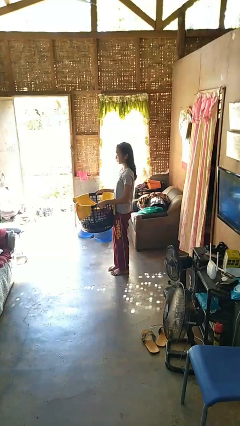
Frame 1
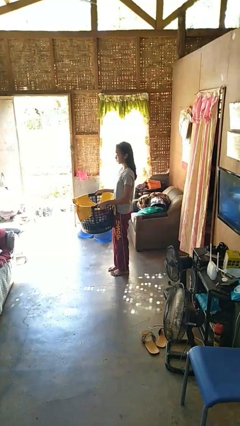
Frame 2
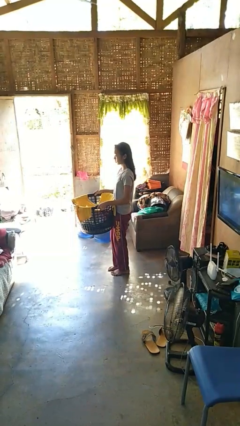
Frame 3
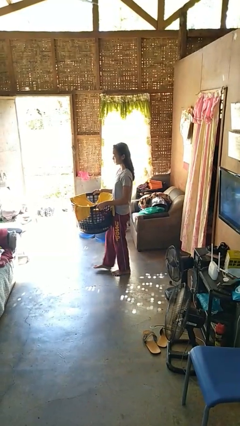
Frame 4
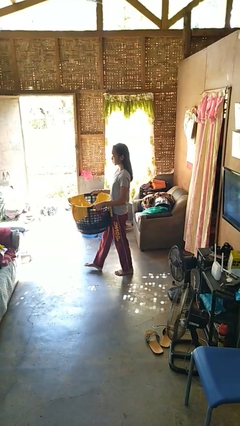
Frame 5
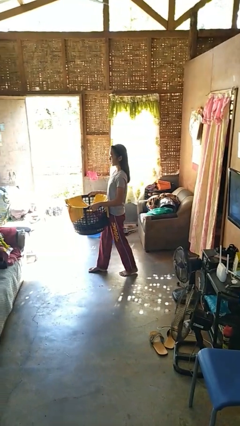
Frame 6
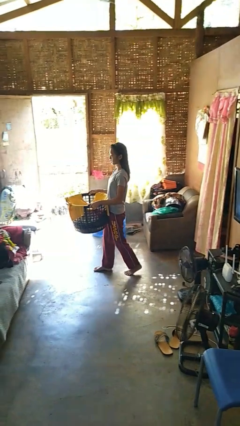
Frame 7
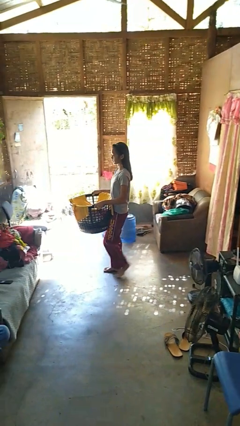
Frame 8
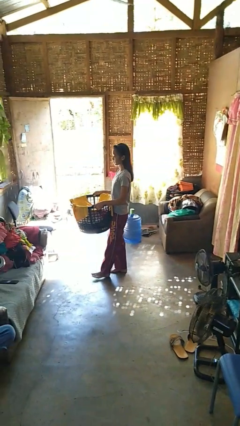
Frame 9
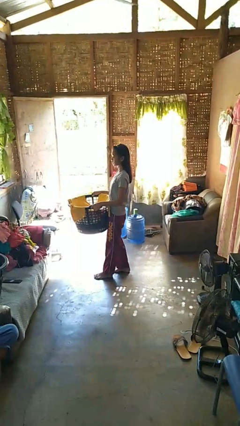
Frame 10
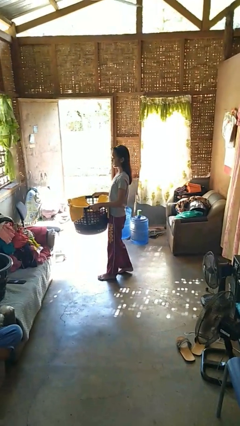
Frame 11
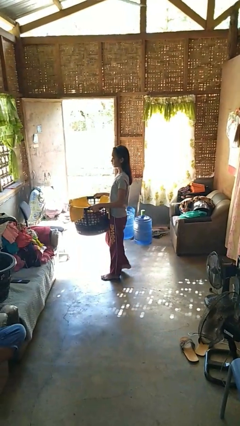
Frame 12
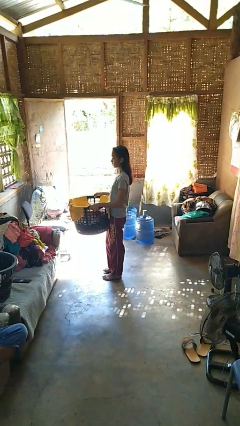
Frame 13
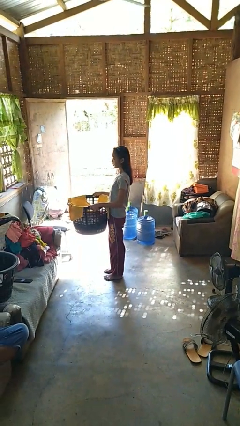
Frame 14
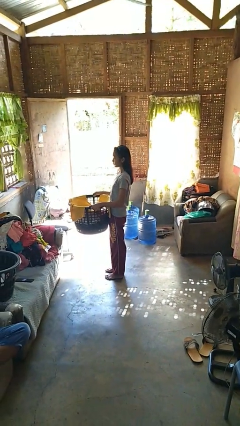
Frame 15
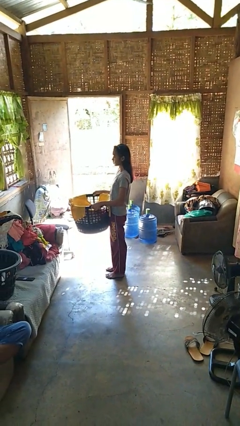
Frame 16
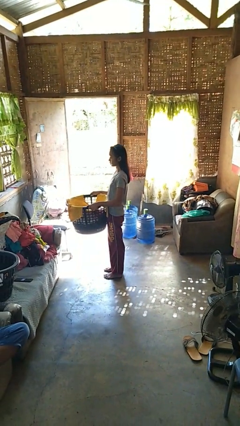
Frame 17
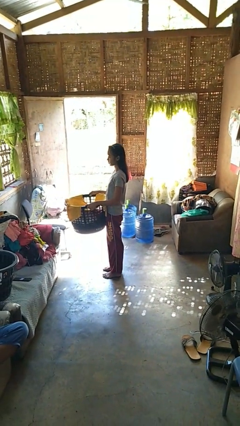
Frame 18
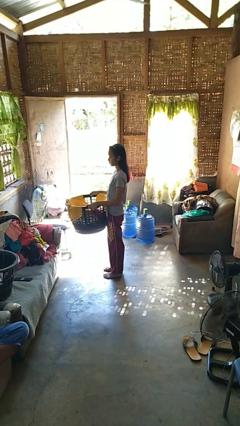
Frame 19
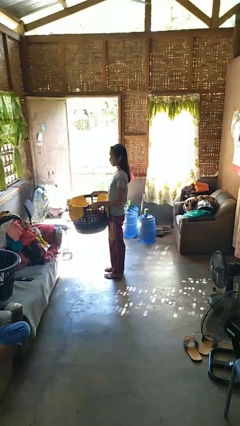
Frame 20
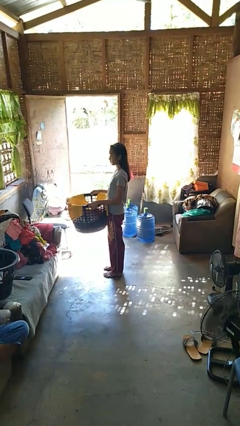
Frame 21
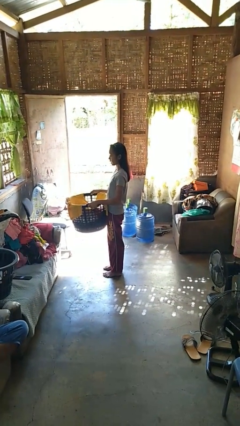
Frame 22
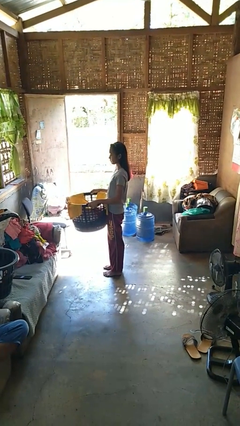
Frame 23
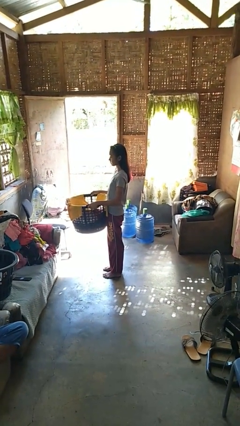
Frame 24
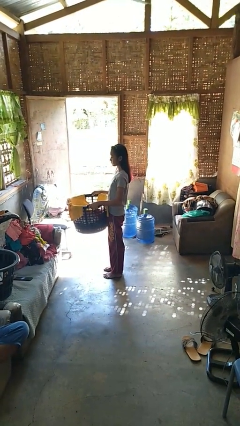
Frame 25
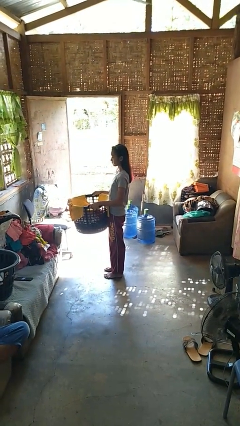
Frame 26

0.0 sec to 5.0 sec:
person carries laundry basket

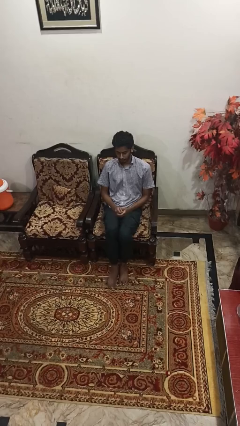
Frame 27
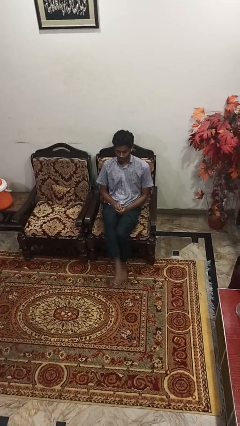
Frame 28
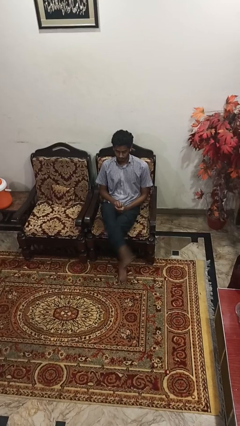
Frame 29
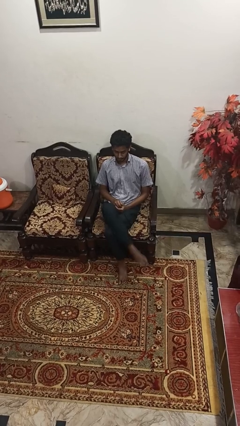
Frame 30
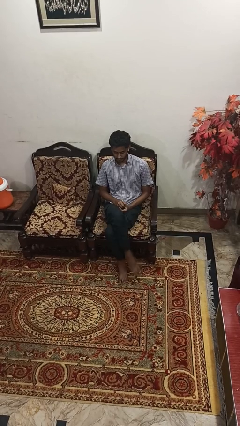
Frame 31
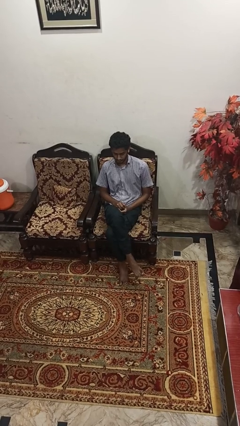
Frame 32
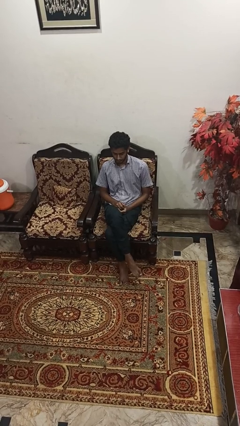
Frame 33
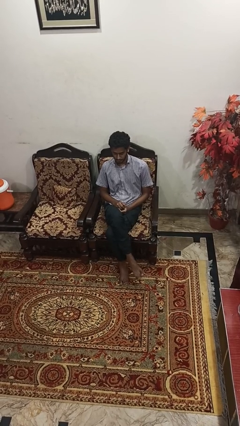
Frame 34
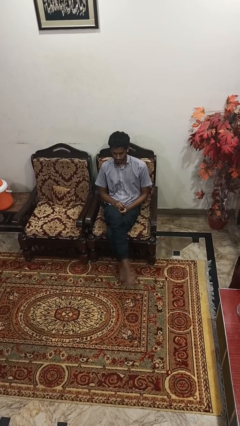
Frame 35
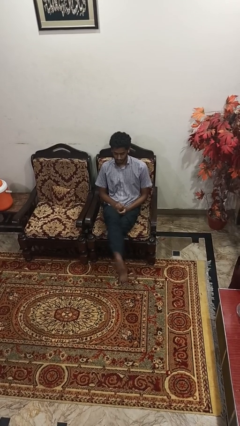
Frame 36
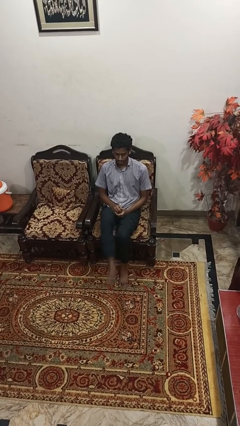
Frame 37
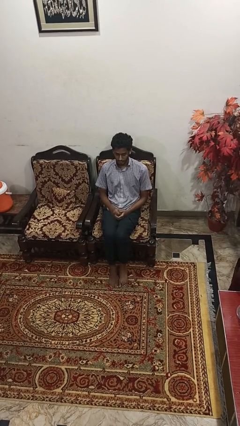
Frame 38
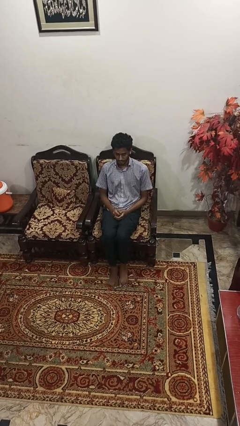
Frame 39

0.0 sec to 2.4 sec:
person crosses legs

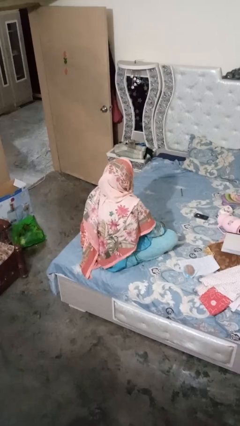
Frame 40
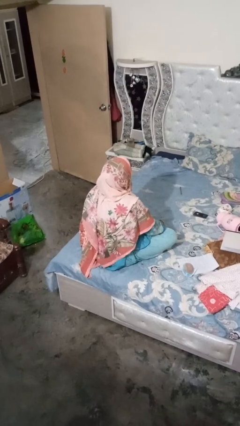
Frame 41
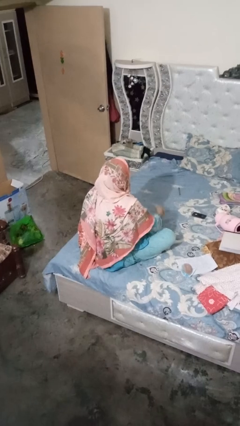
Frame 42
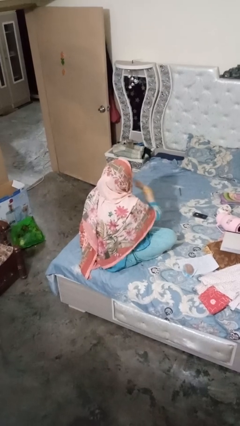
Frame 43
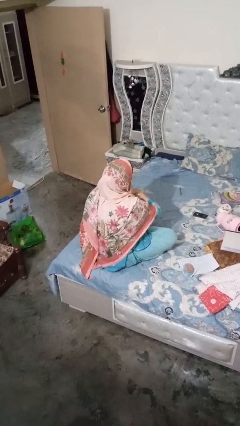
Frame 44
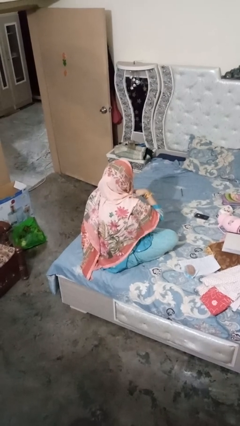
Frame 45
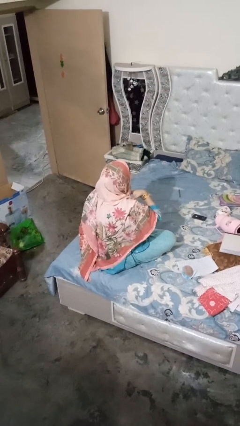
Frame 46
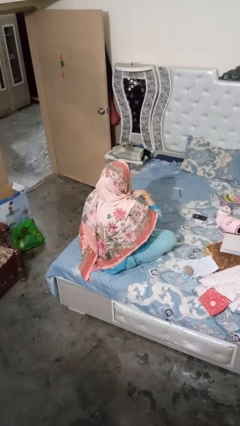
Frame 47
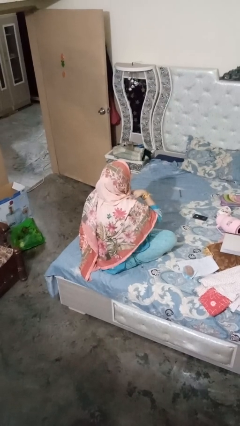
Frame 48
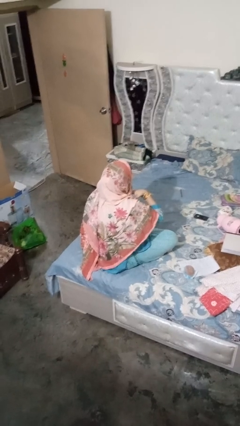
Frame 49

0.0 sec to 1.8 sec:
person gestures cut

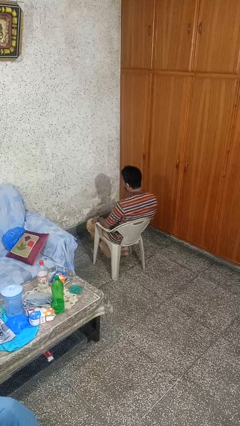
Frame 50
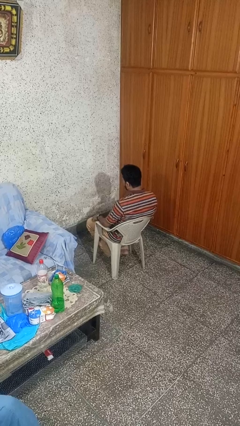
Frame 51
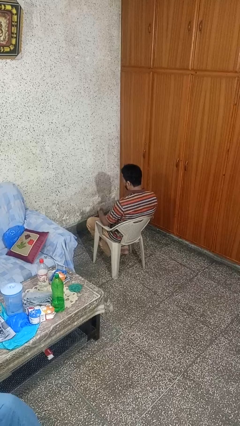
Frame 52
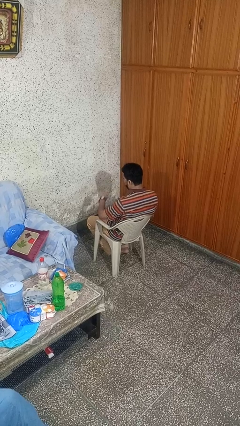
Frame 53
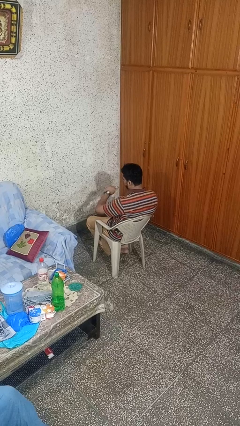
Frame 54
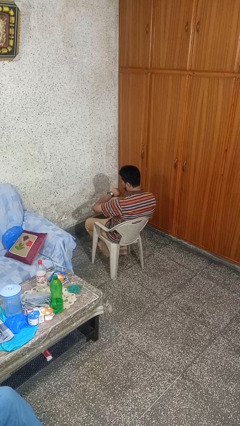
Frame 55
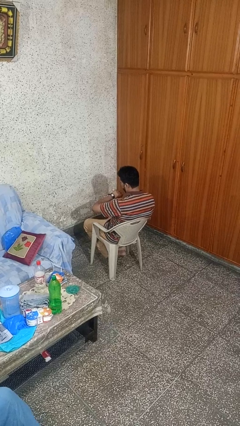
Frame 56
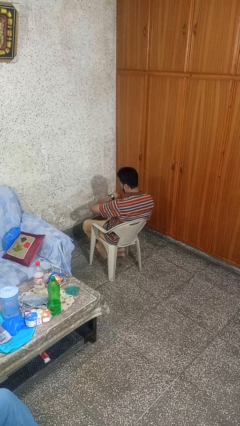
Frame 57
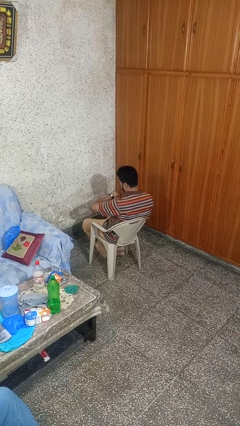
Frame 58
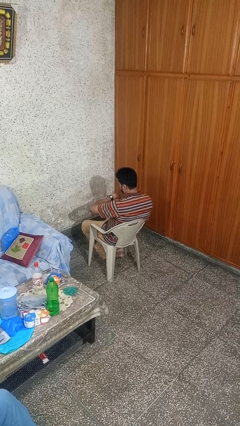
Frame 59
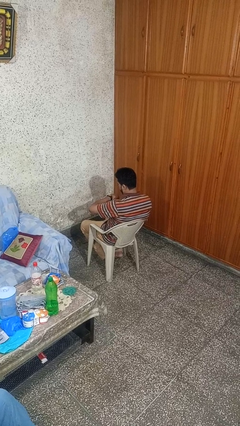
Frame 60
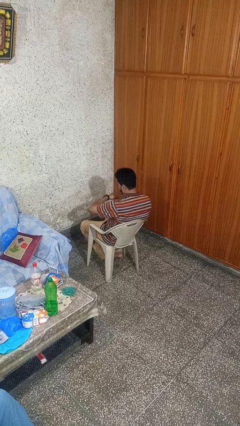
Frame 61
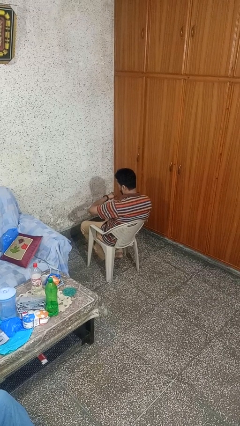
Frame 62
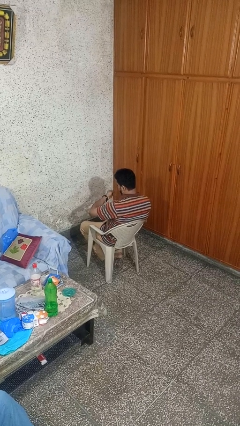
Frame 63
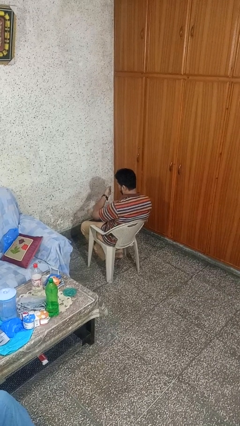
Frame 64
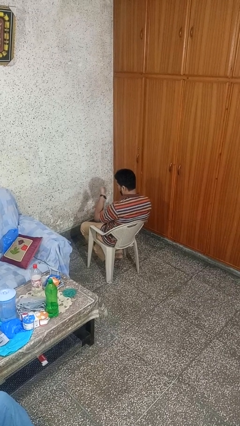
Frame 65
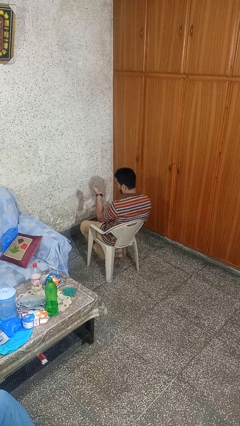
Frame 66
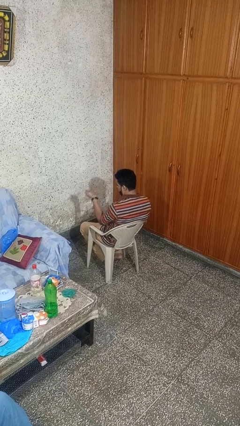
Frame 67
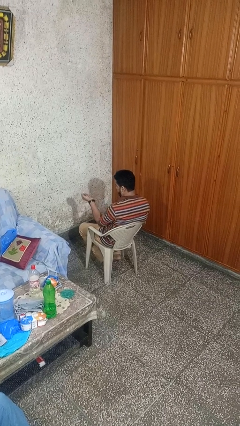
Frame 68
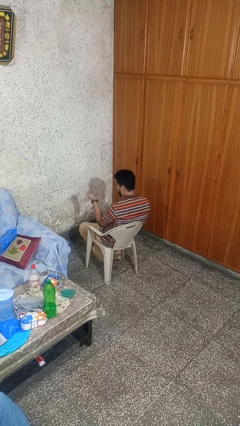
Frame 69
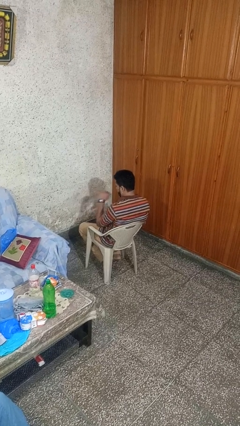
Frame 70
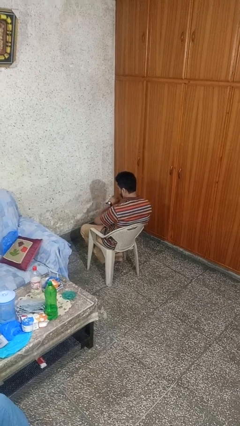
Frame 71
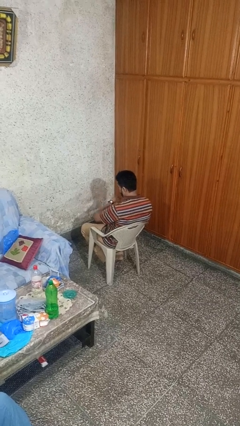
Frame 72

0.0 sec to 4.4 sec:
person looks at wristwatch

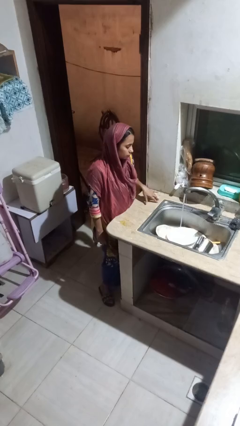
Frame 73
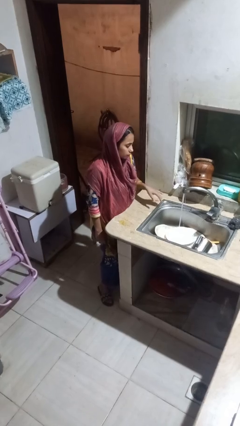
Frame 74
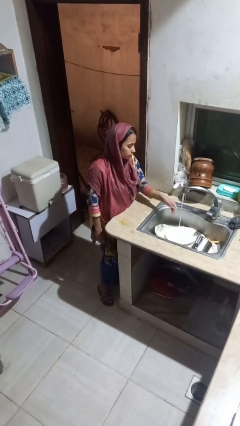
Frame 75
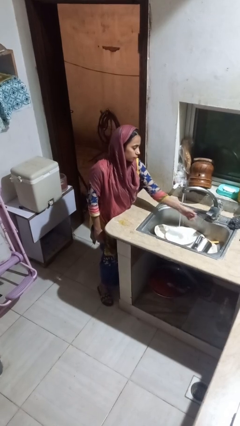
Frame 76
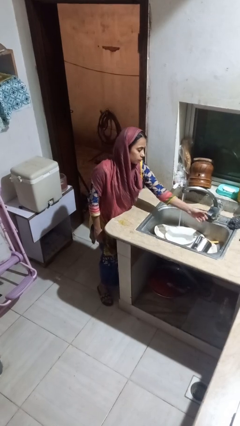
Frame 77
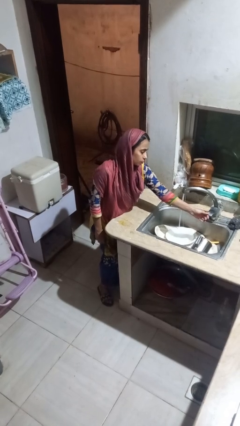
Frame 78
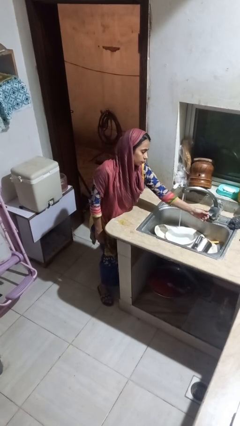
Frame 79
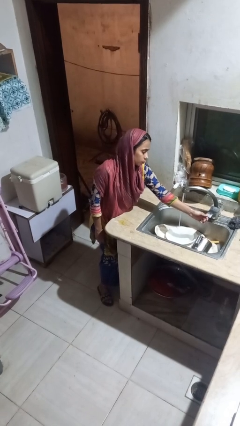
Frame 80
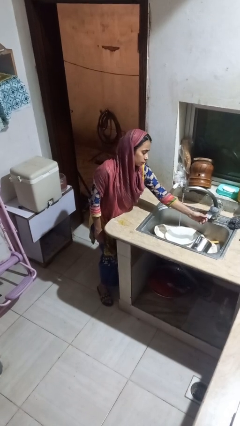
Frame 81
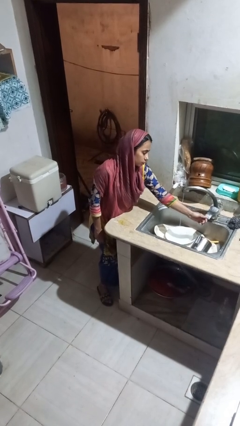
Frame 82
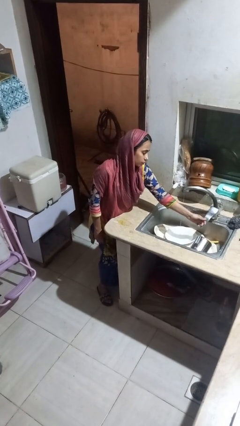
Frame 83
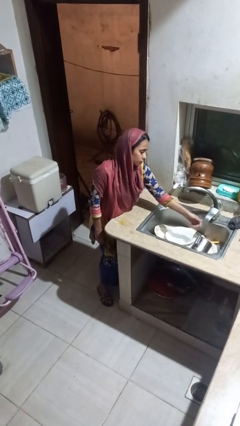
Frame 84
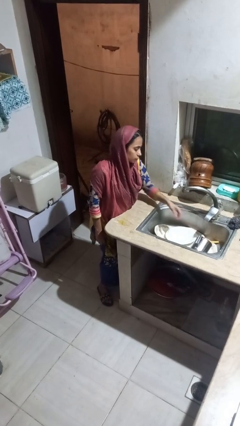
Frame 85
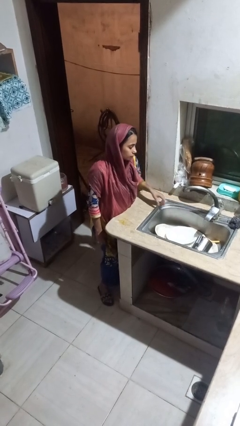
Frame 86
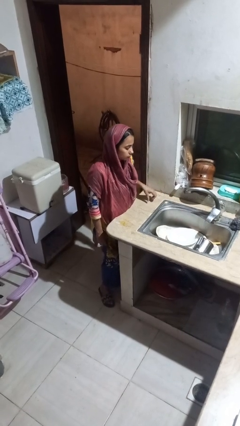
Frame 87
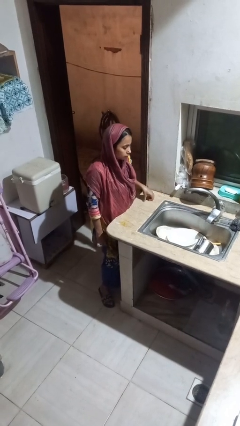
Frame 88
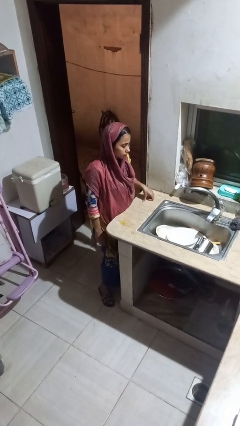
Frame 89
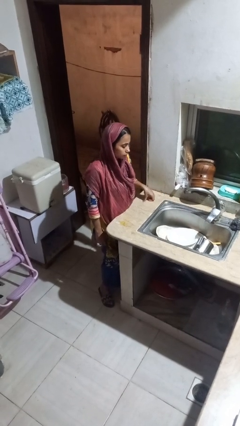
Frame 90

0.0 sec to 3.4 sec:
person turns off faucet

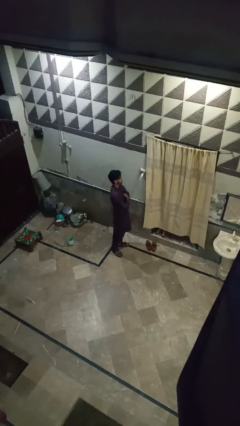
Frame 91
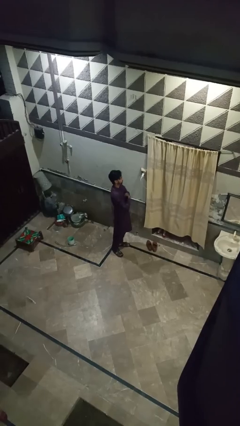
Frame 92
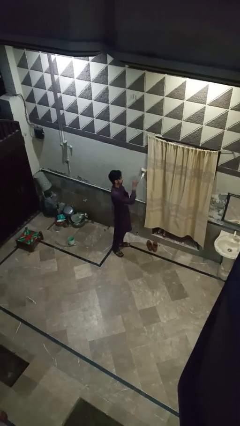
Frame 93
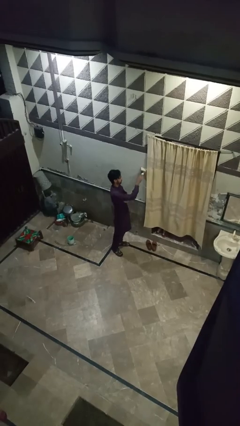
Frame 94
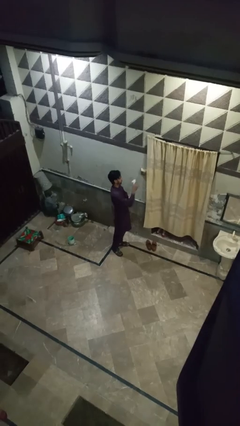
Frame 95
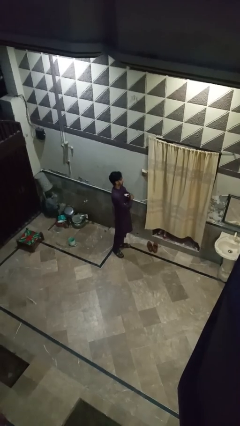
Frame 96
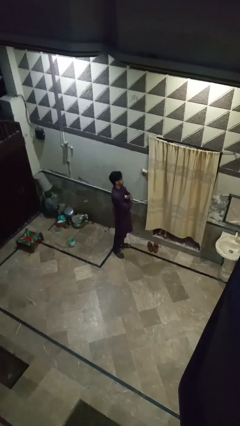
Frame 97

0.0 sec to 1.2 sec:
person unplugs from electrical socket
